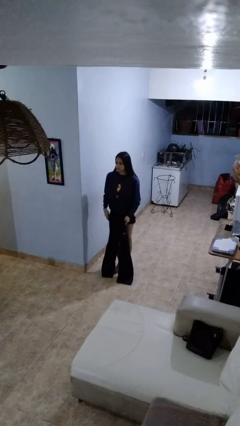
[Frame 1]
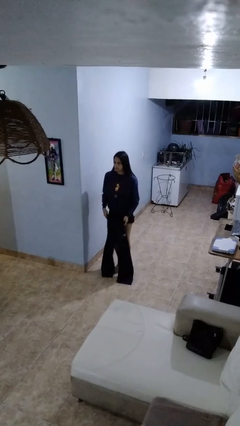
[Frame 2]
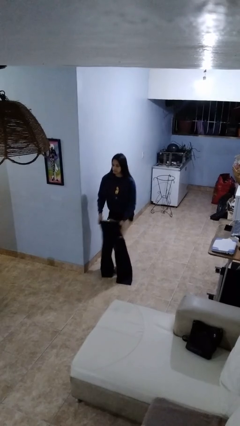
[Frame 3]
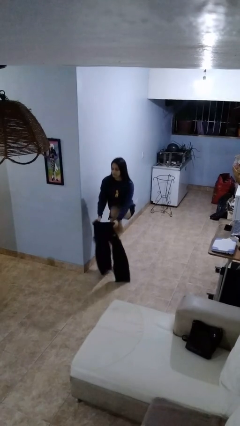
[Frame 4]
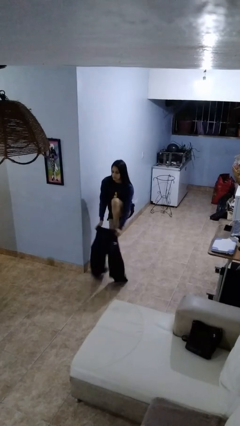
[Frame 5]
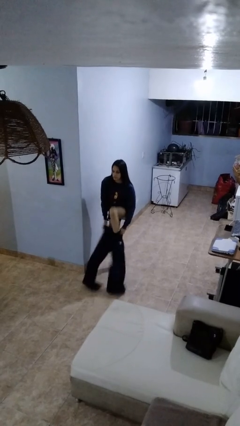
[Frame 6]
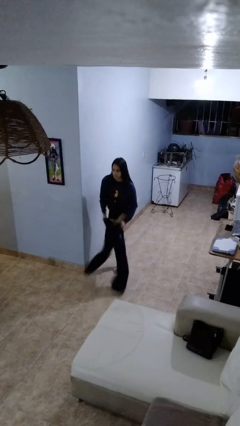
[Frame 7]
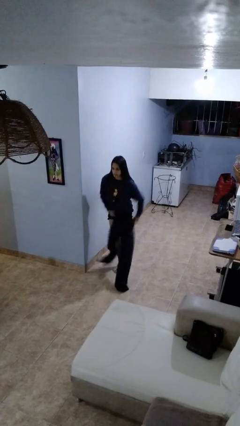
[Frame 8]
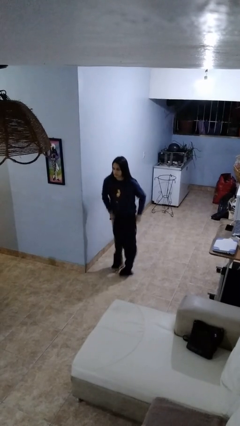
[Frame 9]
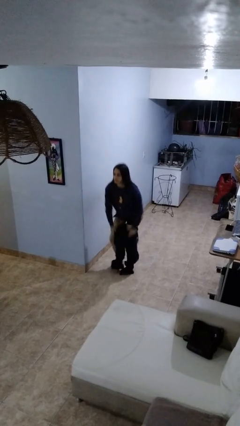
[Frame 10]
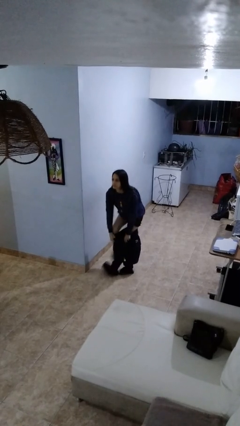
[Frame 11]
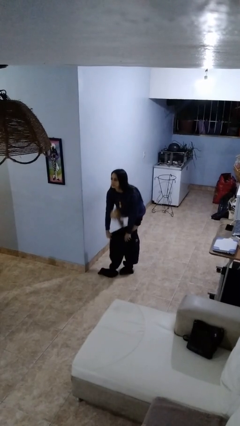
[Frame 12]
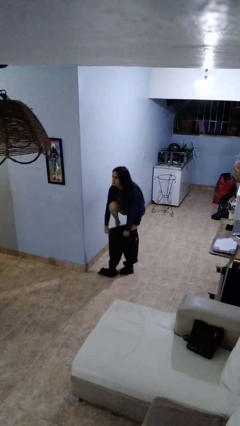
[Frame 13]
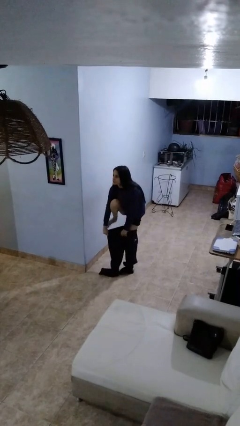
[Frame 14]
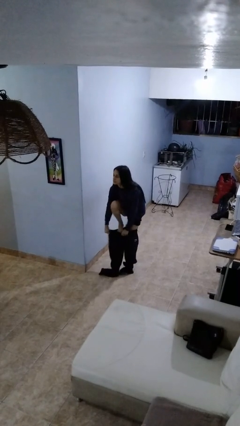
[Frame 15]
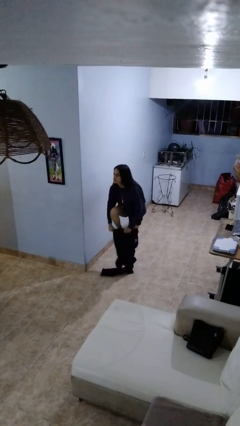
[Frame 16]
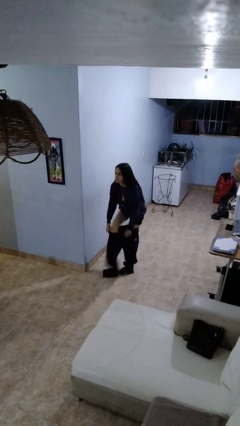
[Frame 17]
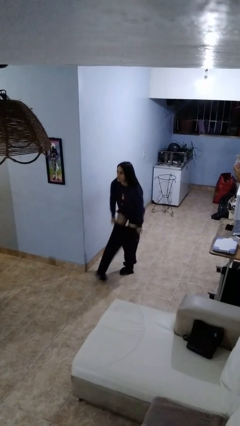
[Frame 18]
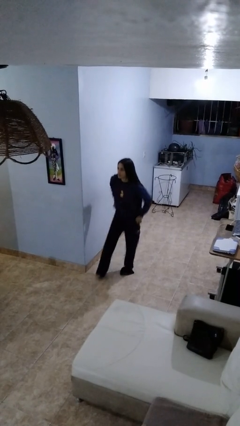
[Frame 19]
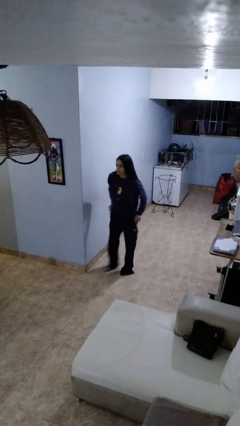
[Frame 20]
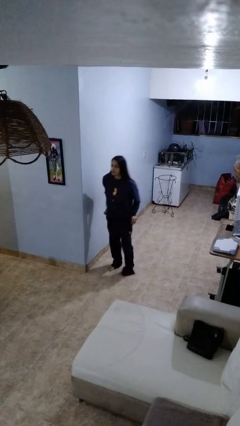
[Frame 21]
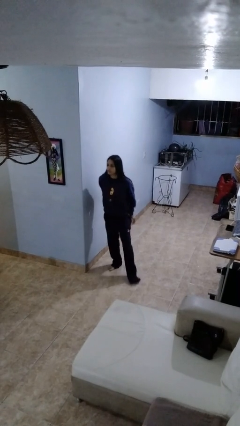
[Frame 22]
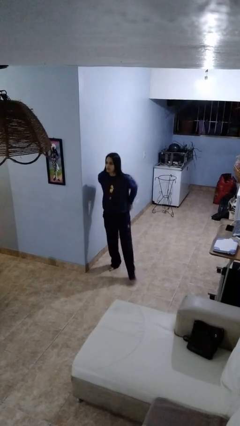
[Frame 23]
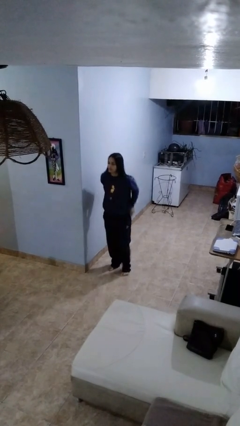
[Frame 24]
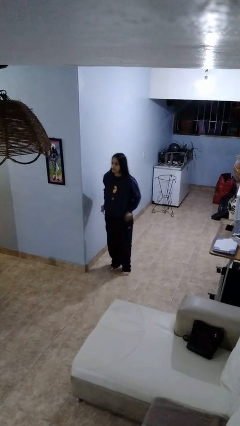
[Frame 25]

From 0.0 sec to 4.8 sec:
person puts on pants

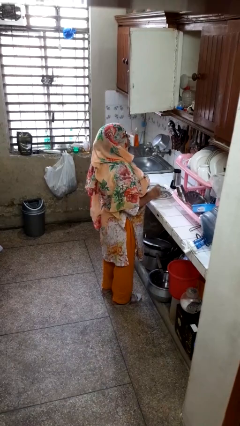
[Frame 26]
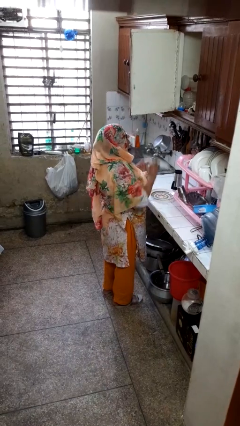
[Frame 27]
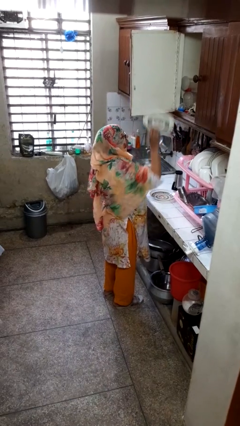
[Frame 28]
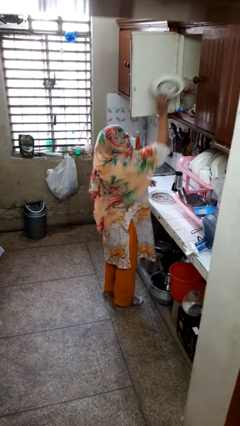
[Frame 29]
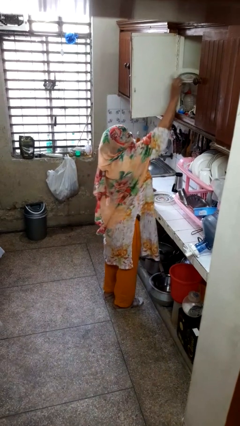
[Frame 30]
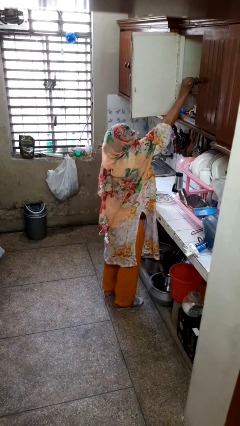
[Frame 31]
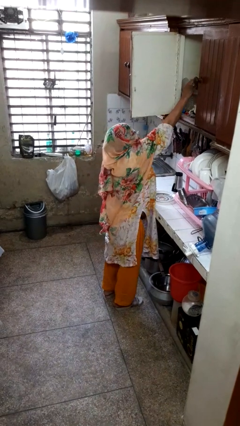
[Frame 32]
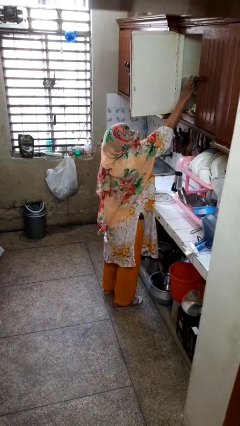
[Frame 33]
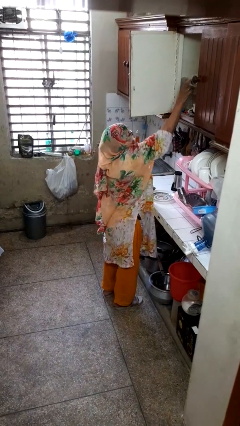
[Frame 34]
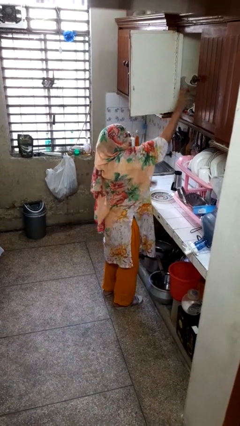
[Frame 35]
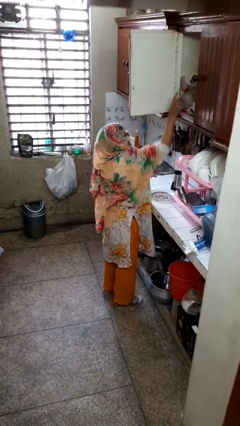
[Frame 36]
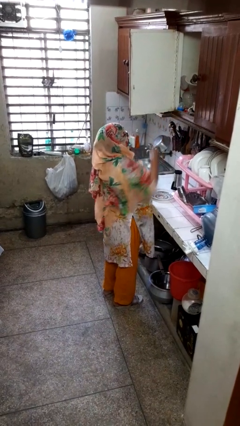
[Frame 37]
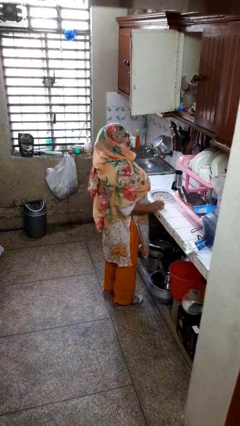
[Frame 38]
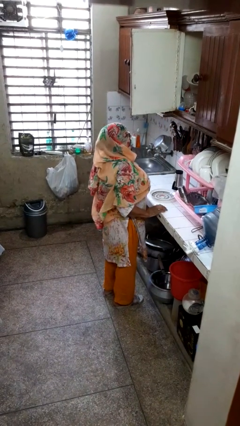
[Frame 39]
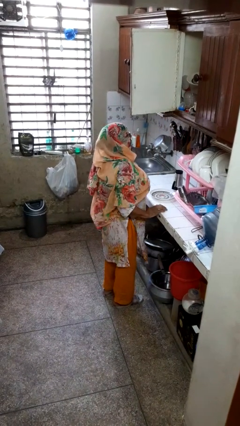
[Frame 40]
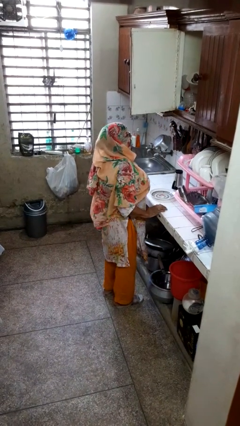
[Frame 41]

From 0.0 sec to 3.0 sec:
person puts object in cabinet

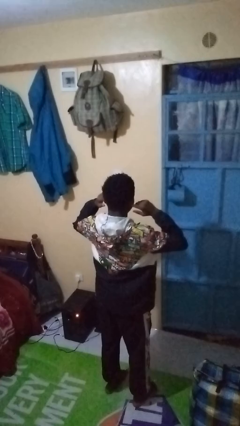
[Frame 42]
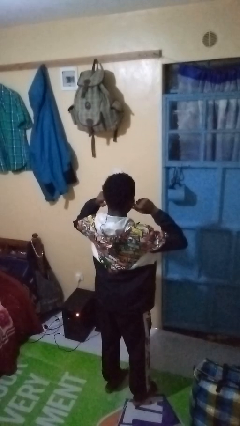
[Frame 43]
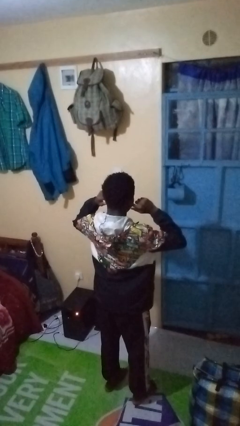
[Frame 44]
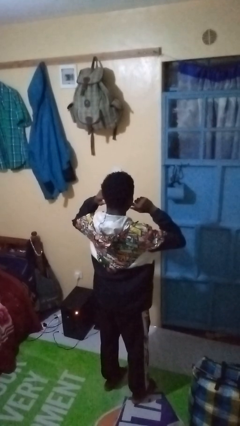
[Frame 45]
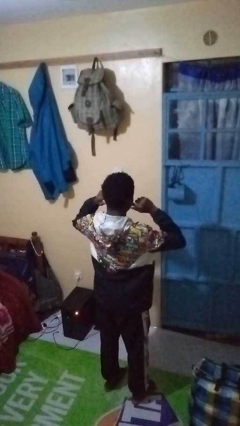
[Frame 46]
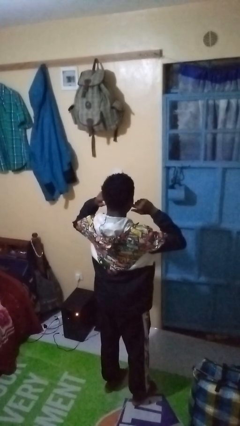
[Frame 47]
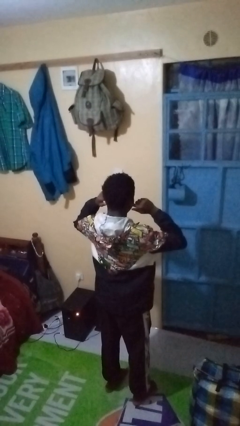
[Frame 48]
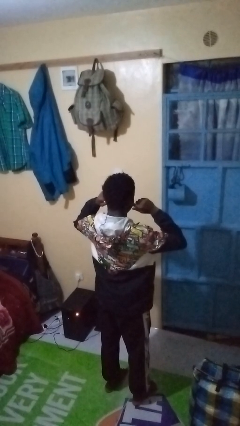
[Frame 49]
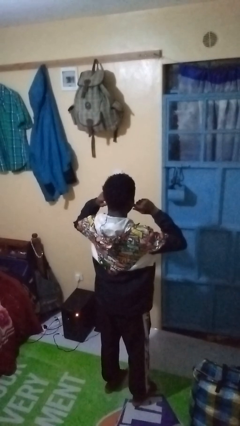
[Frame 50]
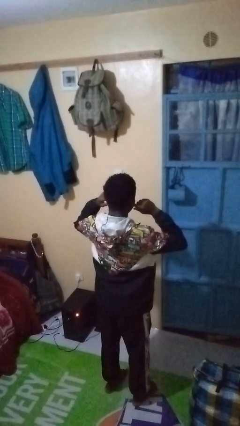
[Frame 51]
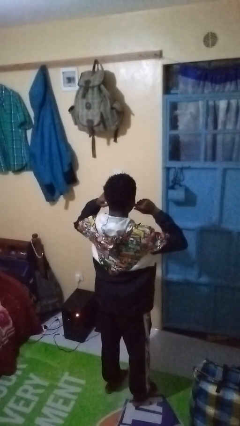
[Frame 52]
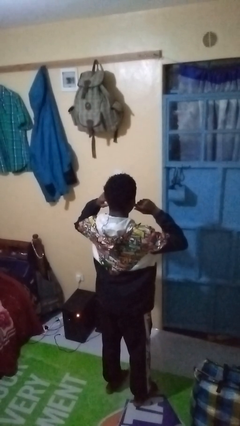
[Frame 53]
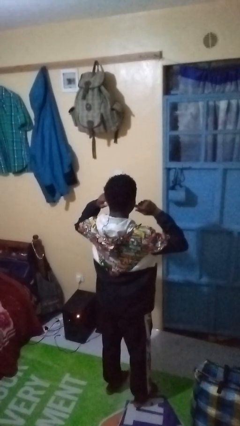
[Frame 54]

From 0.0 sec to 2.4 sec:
person puts fingers in ear

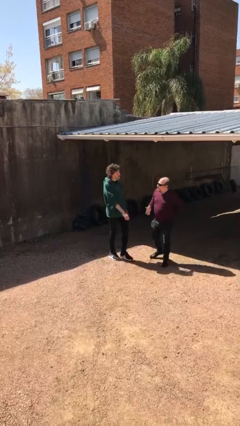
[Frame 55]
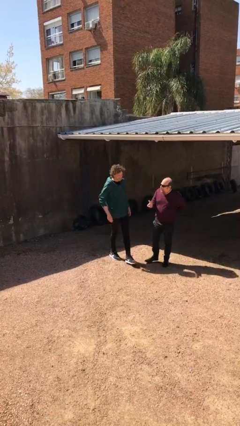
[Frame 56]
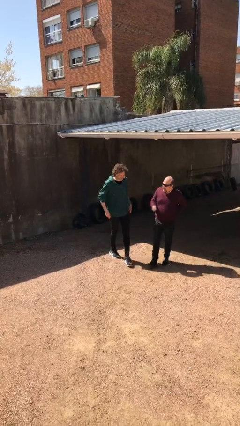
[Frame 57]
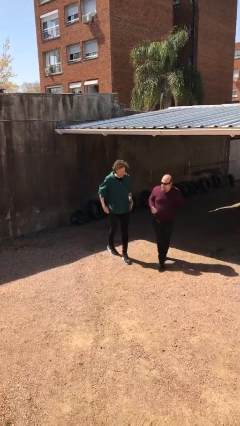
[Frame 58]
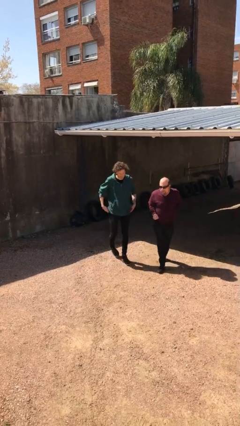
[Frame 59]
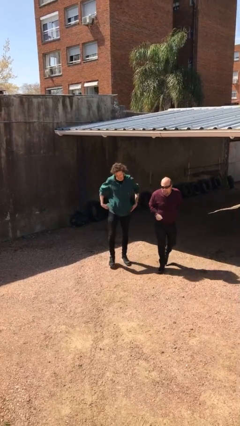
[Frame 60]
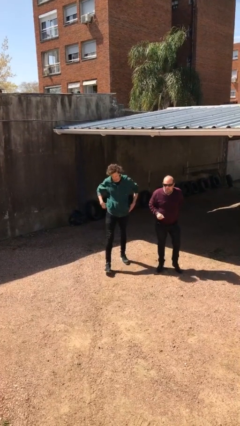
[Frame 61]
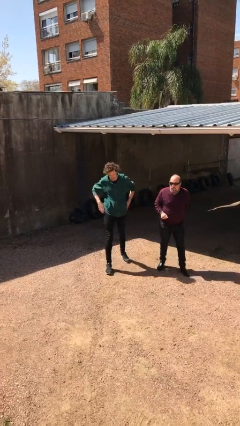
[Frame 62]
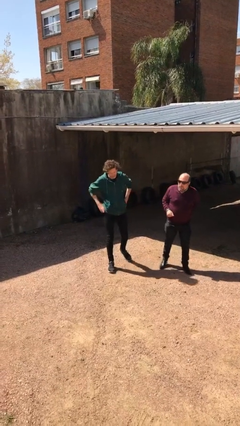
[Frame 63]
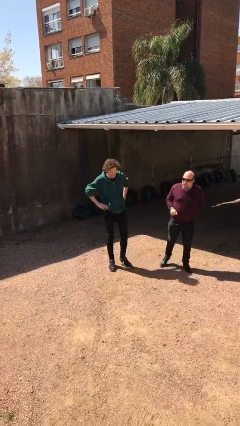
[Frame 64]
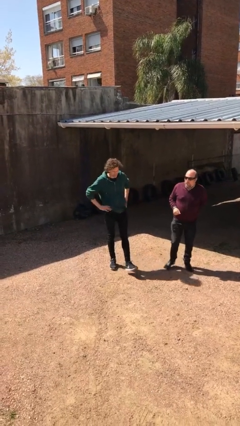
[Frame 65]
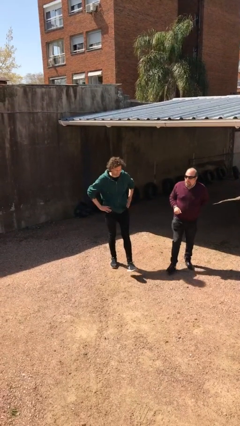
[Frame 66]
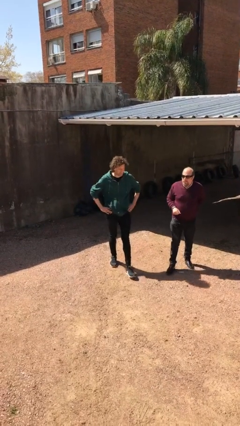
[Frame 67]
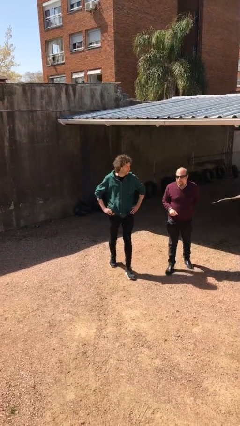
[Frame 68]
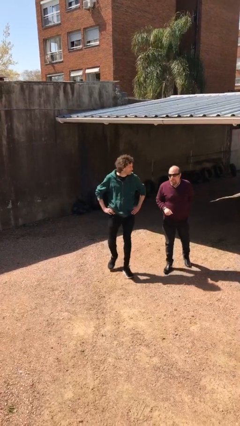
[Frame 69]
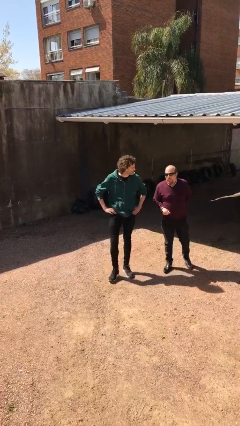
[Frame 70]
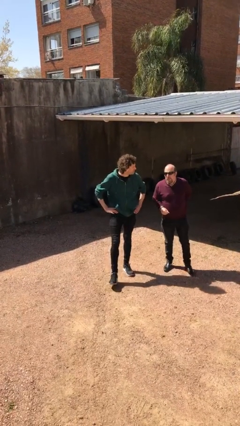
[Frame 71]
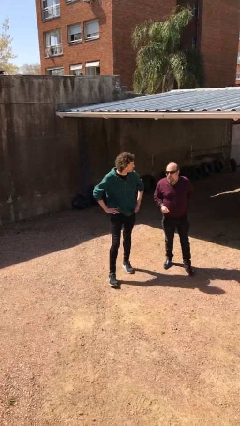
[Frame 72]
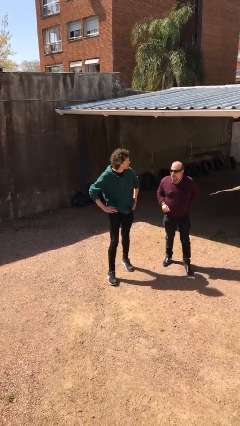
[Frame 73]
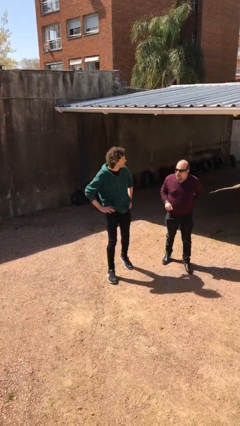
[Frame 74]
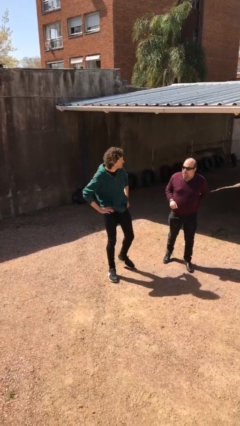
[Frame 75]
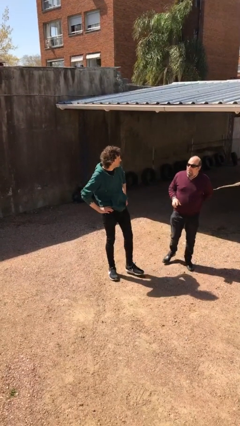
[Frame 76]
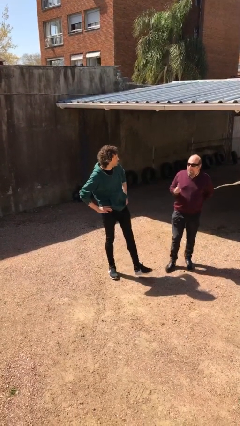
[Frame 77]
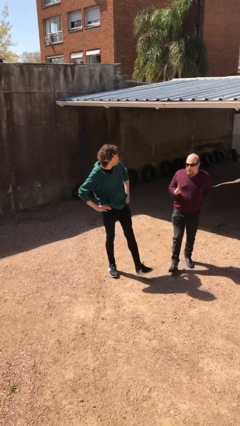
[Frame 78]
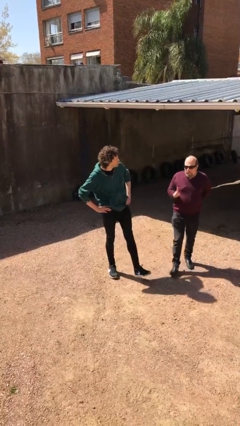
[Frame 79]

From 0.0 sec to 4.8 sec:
person talks to person

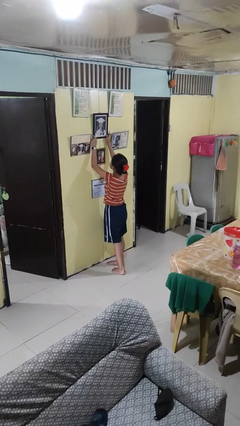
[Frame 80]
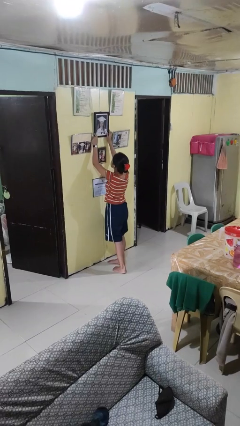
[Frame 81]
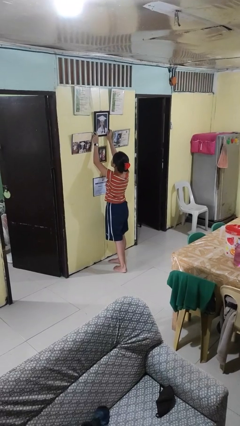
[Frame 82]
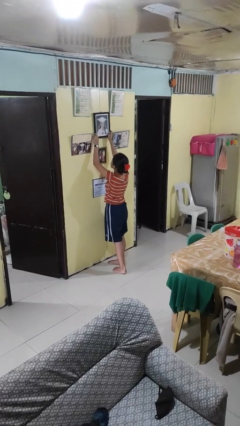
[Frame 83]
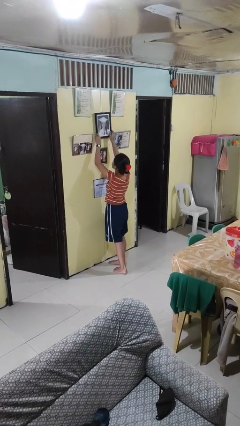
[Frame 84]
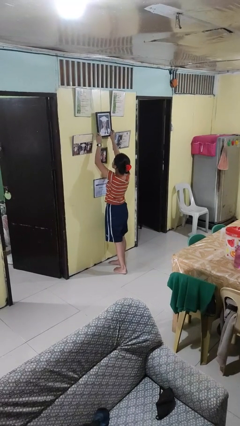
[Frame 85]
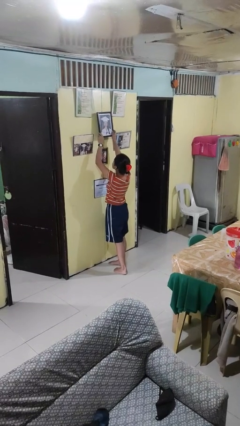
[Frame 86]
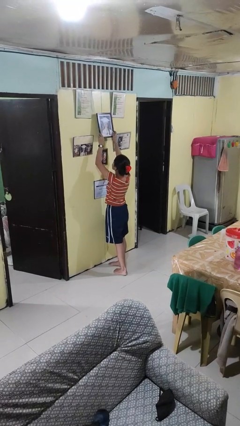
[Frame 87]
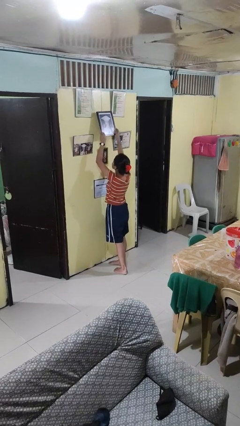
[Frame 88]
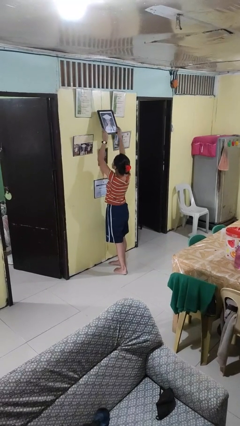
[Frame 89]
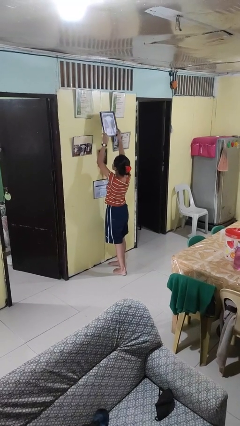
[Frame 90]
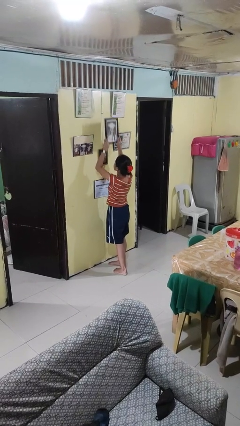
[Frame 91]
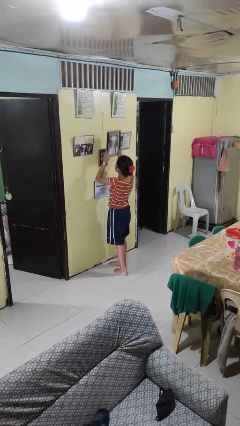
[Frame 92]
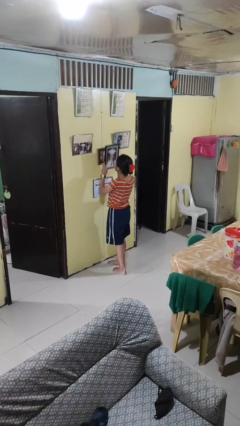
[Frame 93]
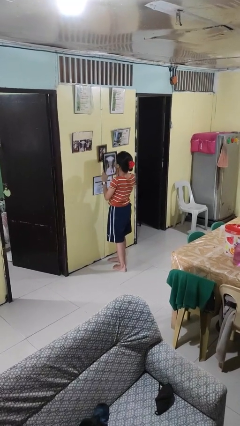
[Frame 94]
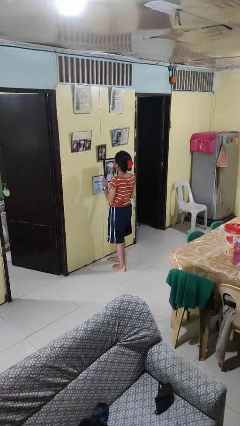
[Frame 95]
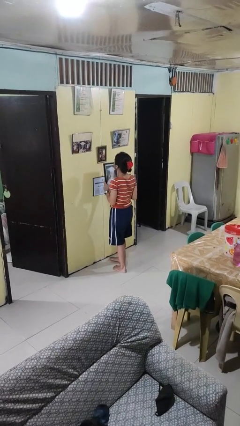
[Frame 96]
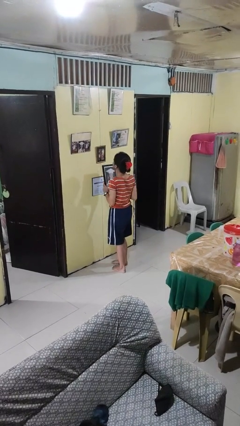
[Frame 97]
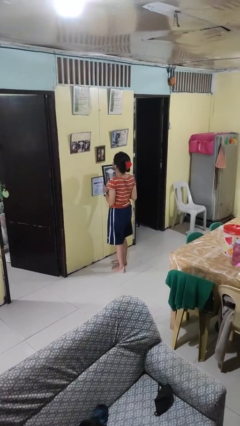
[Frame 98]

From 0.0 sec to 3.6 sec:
person takes down picture frame
